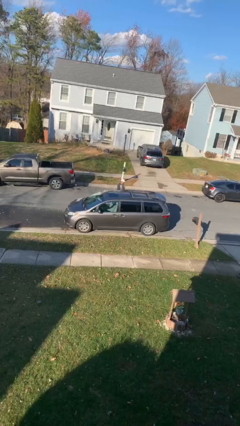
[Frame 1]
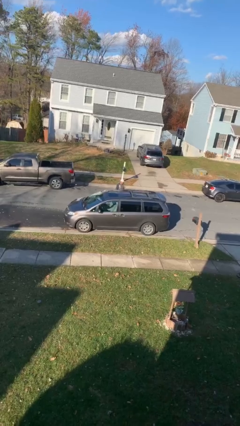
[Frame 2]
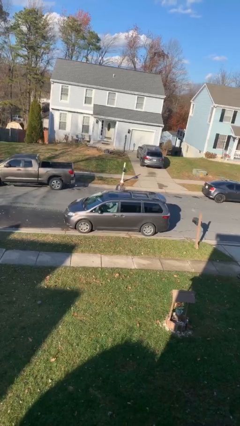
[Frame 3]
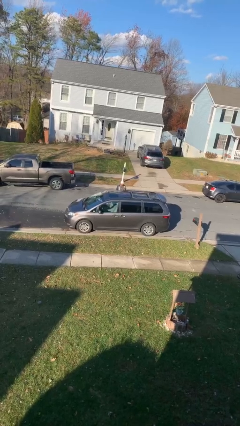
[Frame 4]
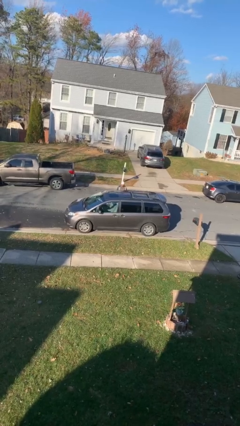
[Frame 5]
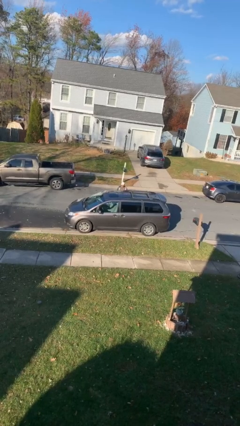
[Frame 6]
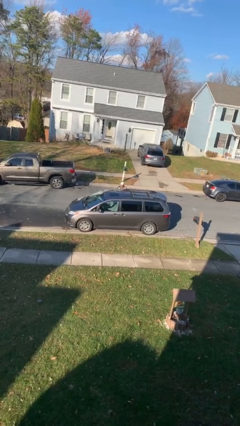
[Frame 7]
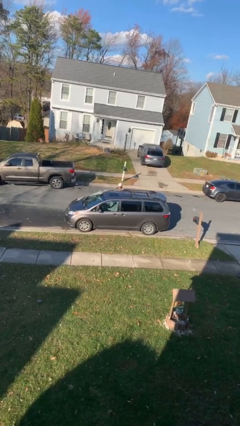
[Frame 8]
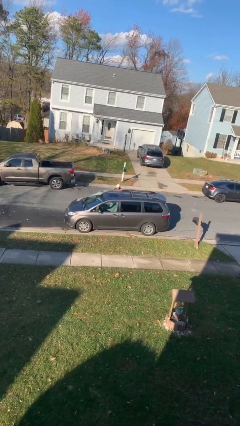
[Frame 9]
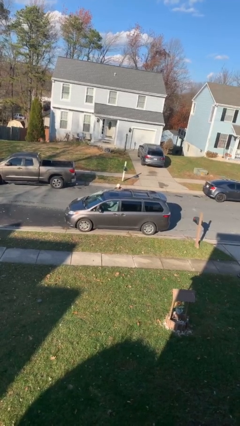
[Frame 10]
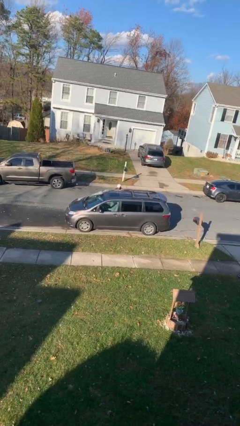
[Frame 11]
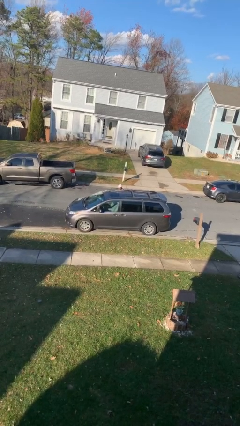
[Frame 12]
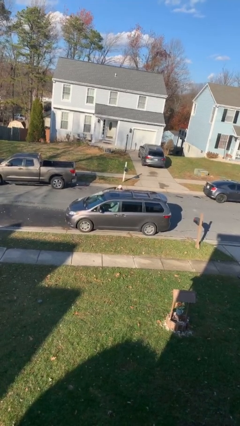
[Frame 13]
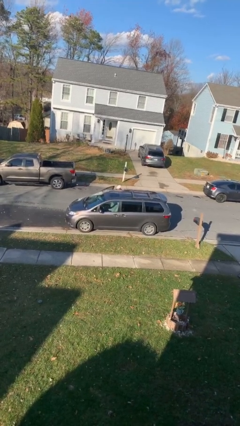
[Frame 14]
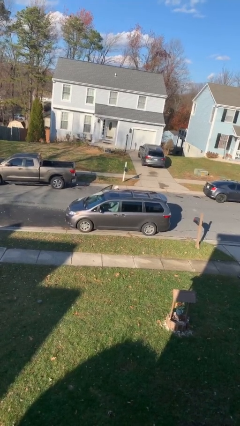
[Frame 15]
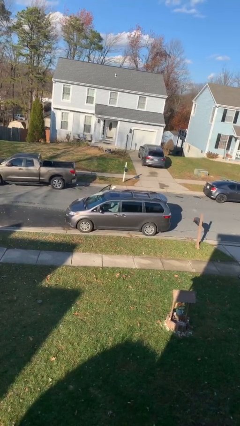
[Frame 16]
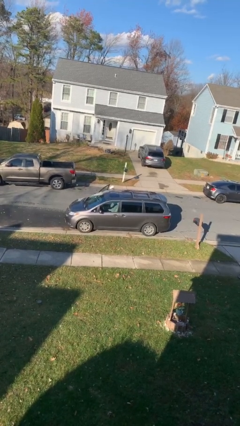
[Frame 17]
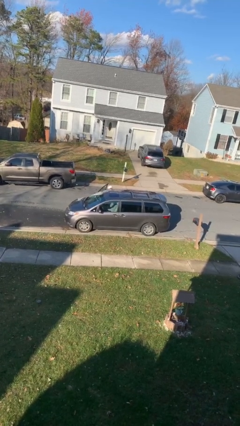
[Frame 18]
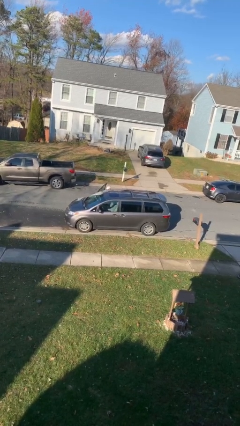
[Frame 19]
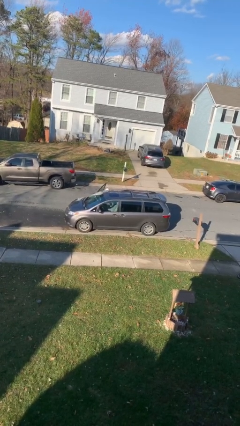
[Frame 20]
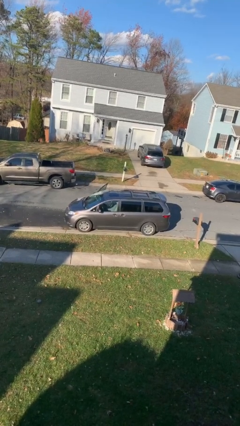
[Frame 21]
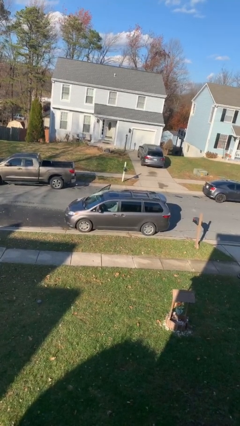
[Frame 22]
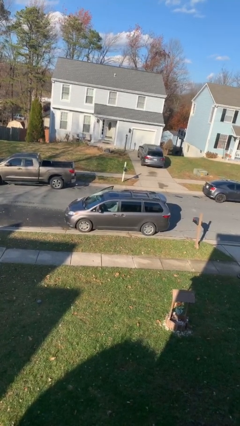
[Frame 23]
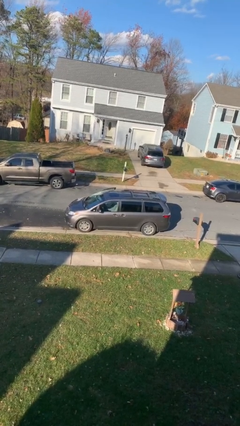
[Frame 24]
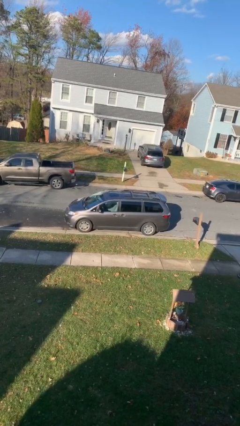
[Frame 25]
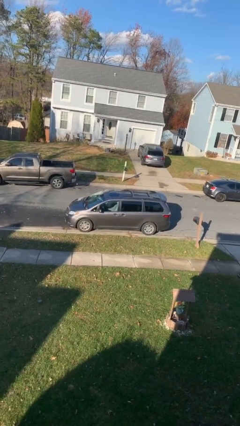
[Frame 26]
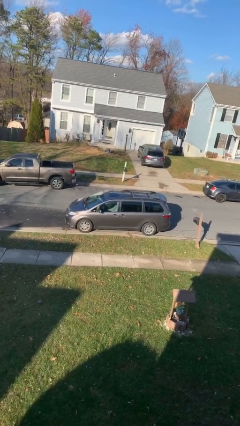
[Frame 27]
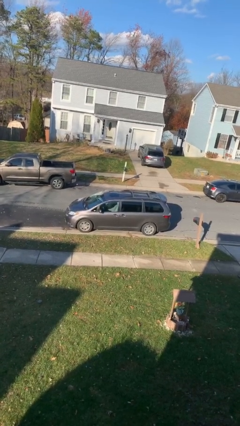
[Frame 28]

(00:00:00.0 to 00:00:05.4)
car picks up person

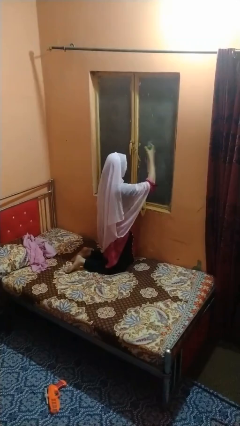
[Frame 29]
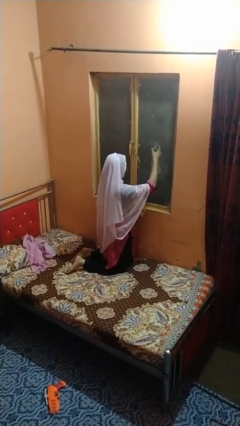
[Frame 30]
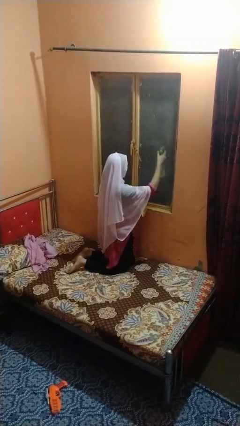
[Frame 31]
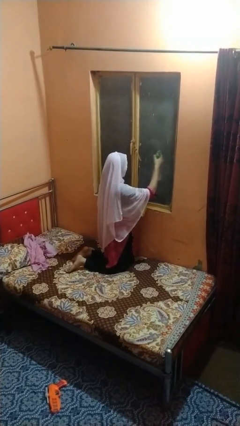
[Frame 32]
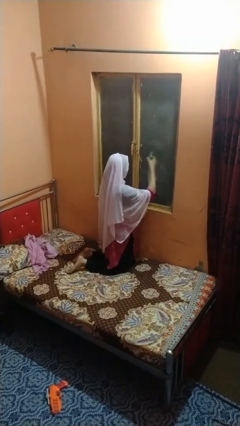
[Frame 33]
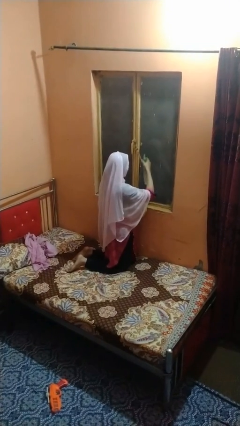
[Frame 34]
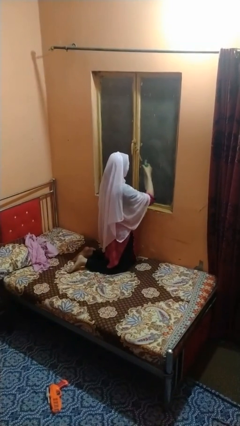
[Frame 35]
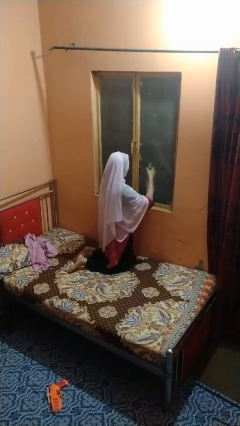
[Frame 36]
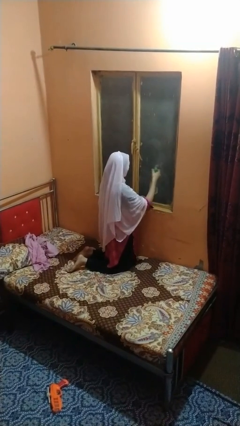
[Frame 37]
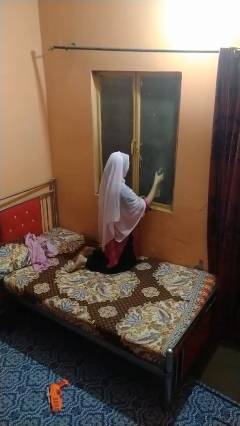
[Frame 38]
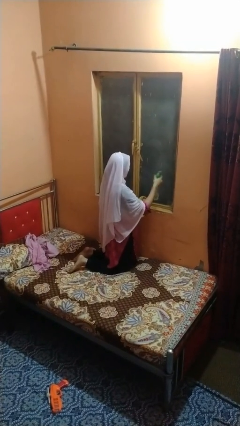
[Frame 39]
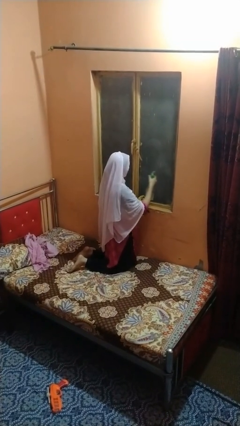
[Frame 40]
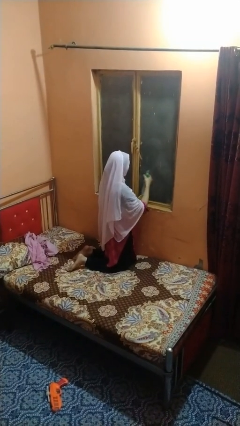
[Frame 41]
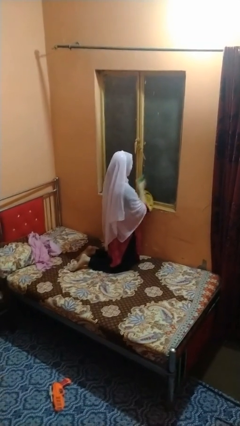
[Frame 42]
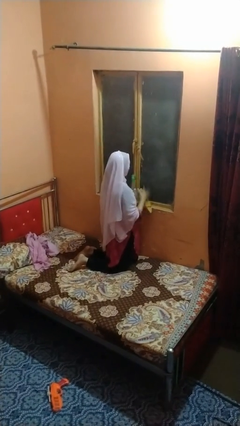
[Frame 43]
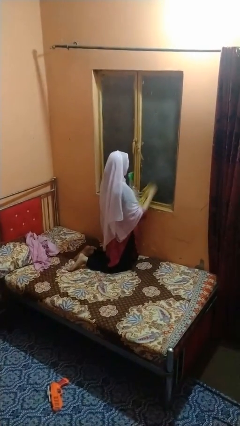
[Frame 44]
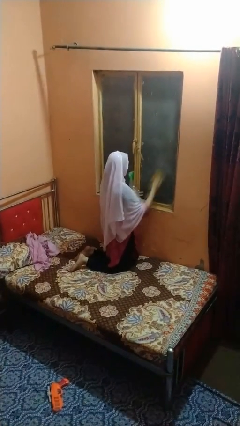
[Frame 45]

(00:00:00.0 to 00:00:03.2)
person sprays from bottle

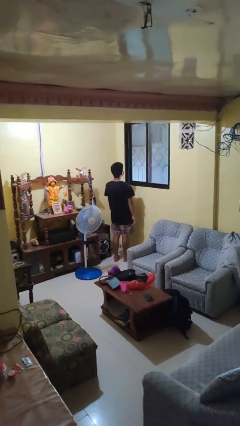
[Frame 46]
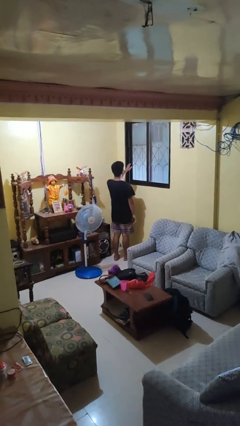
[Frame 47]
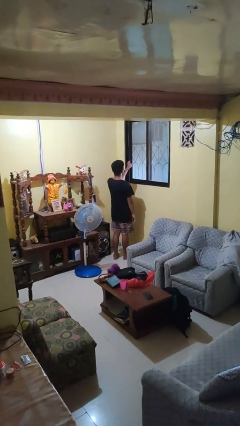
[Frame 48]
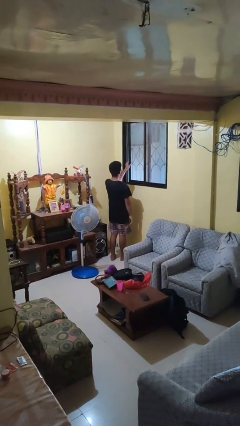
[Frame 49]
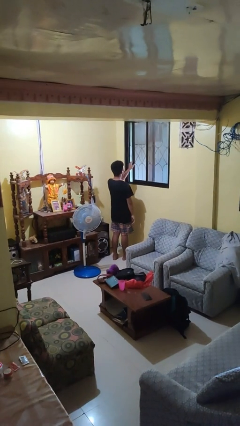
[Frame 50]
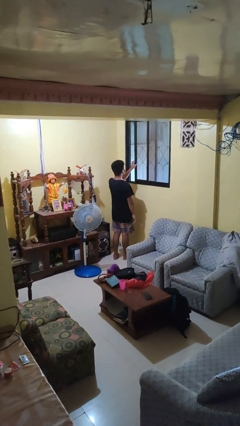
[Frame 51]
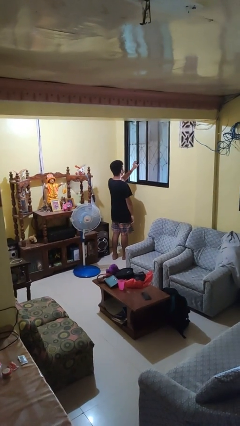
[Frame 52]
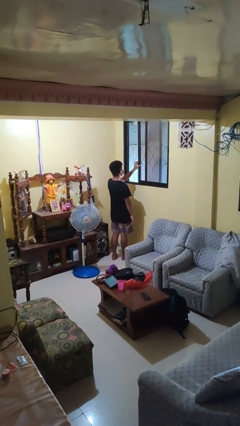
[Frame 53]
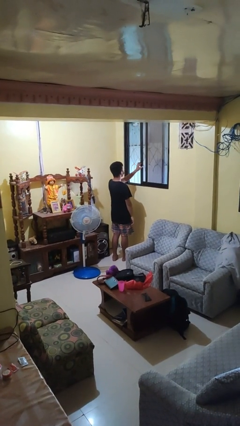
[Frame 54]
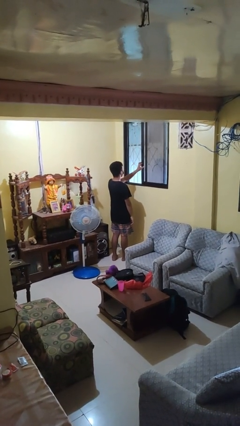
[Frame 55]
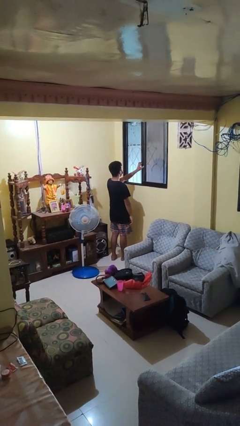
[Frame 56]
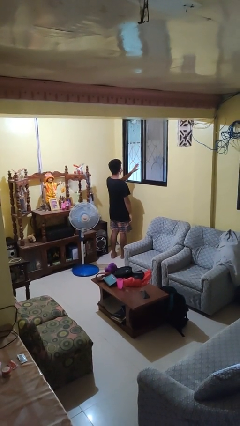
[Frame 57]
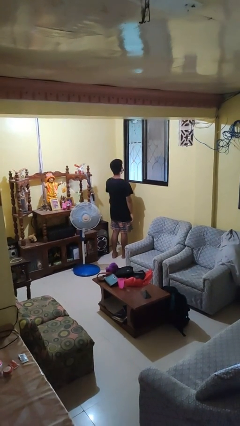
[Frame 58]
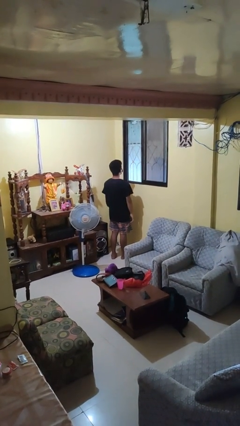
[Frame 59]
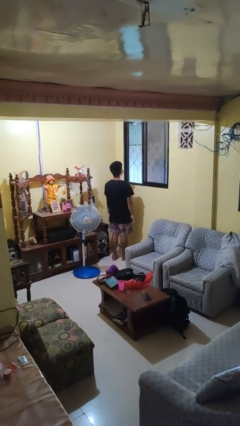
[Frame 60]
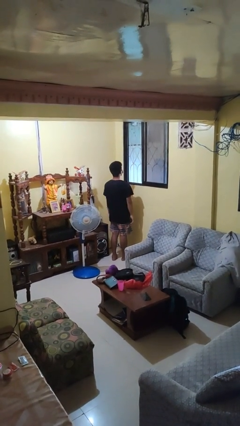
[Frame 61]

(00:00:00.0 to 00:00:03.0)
person opens home window

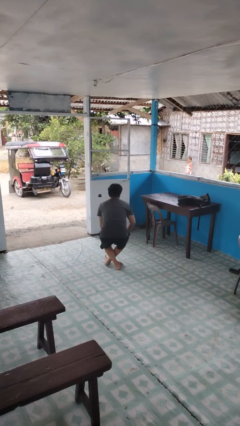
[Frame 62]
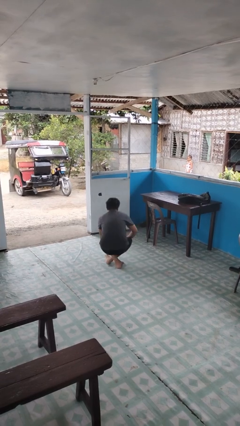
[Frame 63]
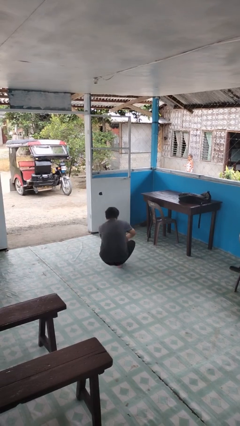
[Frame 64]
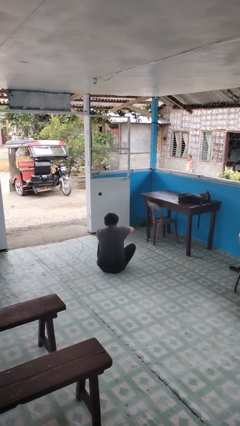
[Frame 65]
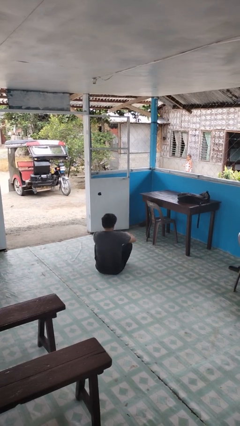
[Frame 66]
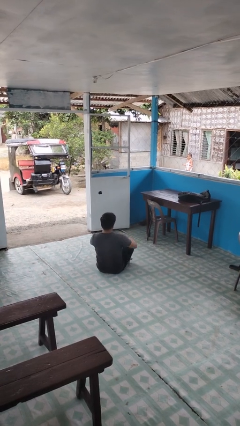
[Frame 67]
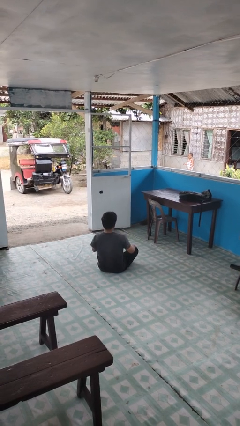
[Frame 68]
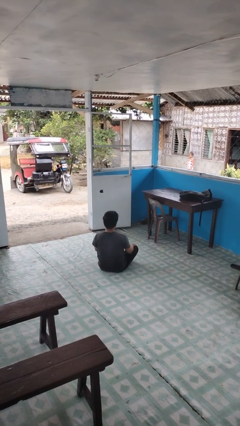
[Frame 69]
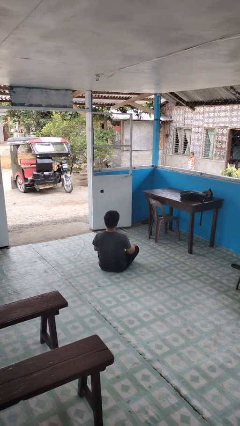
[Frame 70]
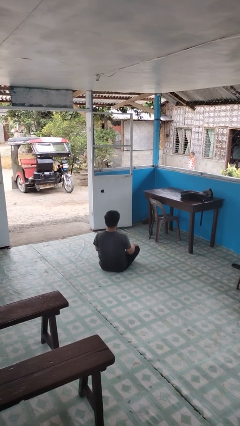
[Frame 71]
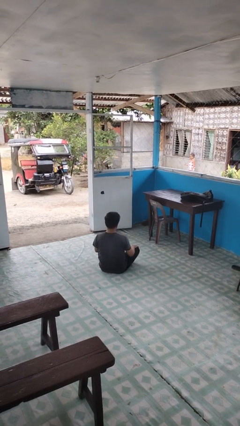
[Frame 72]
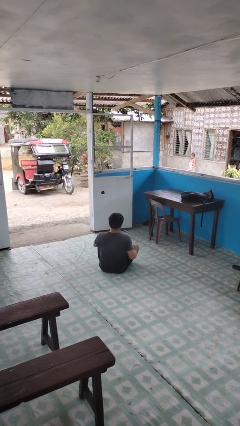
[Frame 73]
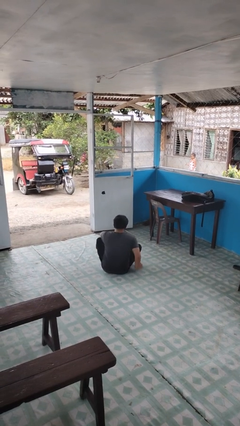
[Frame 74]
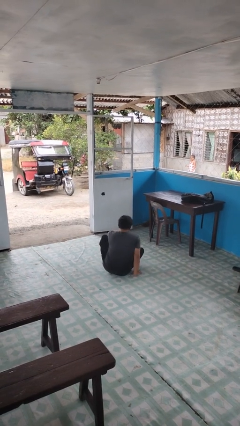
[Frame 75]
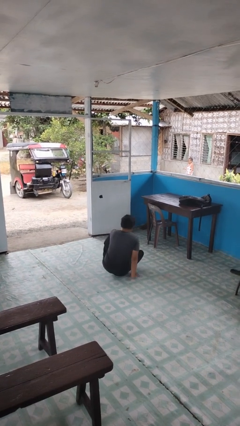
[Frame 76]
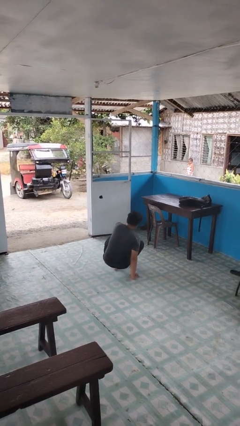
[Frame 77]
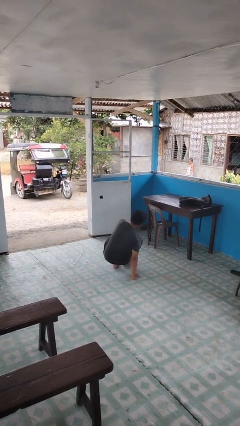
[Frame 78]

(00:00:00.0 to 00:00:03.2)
person sits crisscross

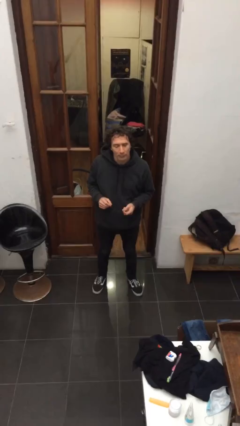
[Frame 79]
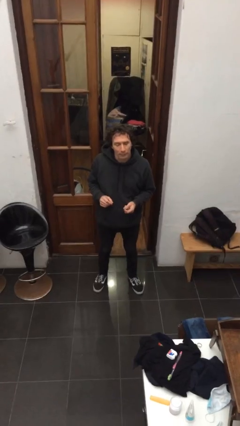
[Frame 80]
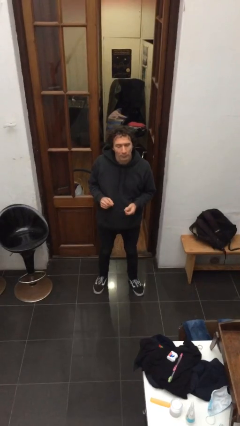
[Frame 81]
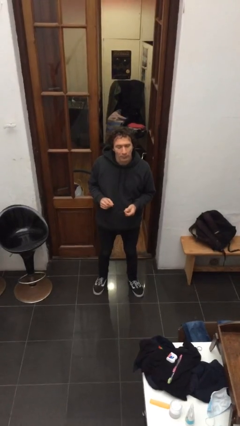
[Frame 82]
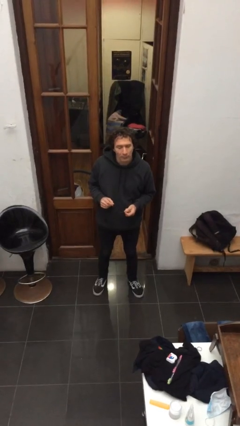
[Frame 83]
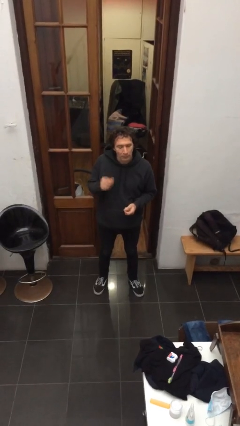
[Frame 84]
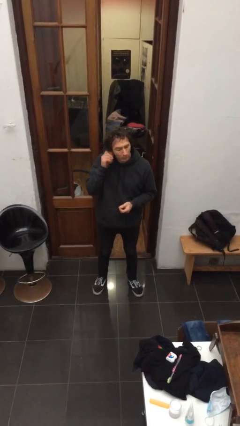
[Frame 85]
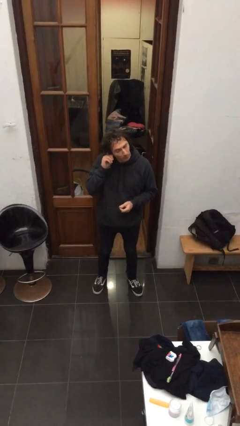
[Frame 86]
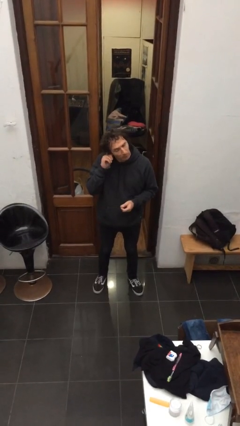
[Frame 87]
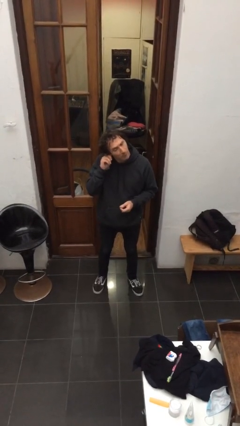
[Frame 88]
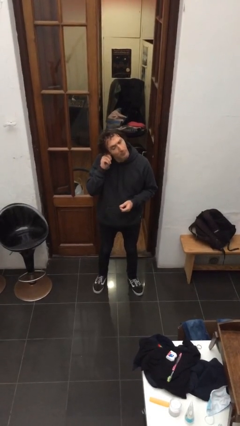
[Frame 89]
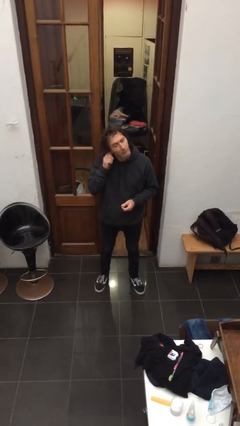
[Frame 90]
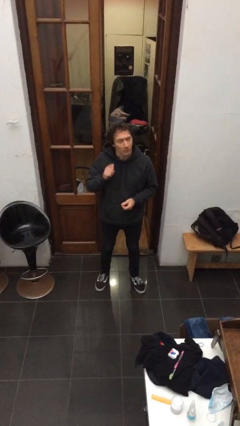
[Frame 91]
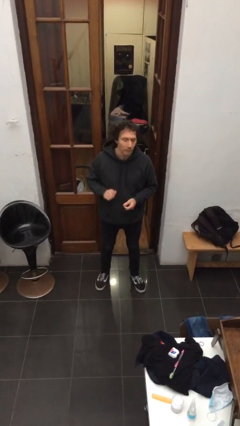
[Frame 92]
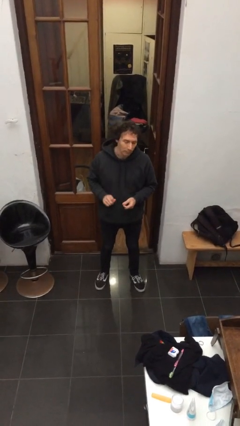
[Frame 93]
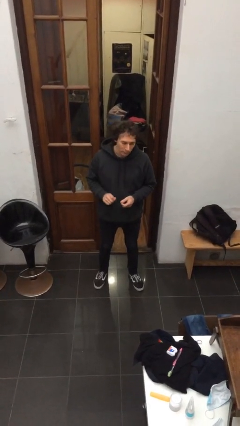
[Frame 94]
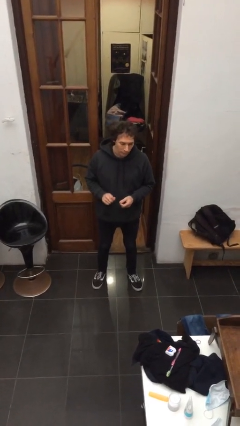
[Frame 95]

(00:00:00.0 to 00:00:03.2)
person takes off earrings
